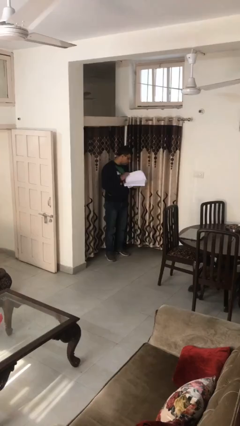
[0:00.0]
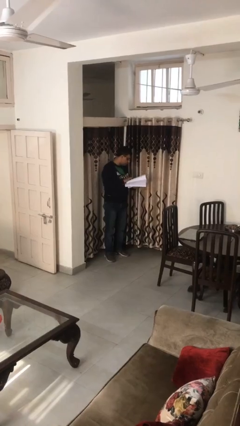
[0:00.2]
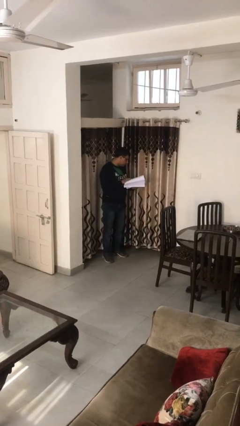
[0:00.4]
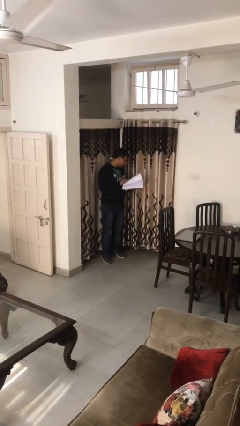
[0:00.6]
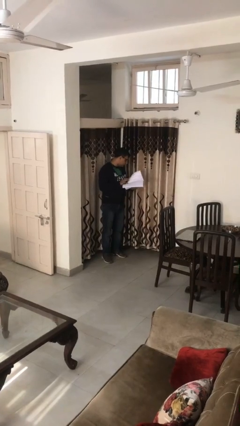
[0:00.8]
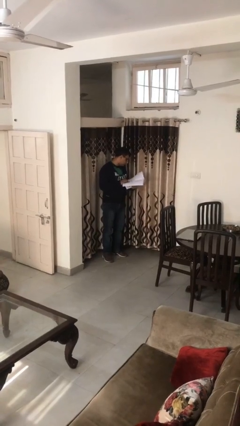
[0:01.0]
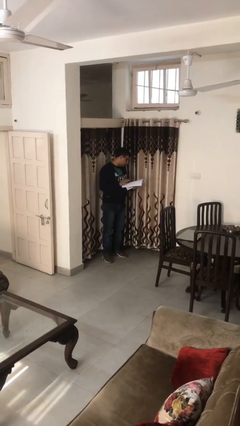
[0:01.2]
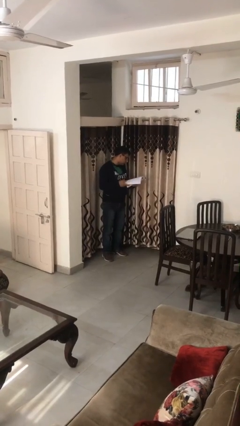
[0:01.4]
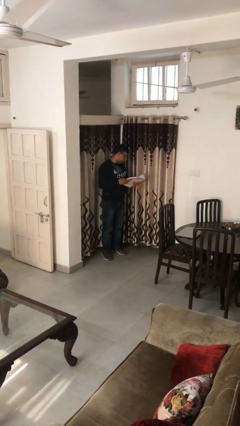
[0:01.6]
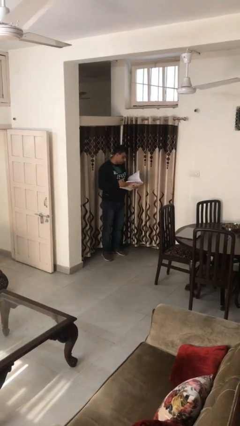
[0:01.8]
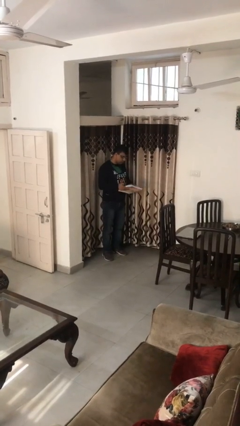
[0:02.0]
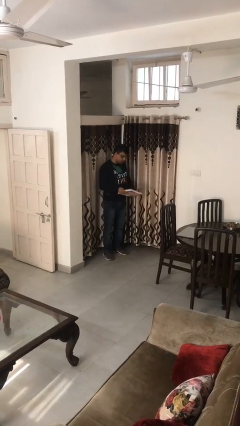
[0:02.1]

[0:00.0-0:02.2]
person reads document

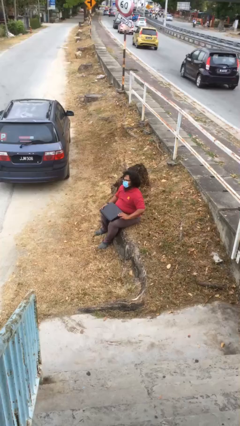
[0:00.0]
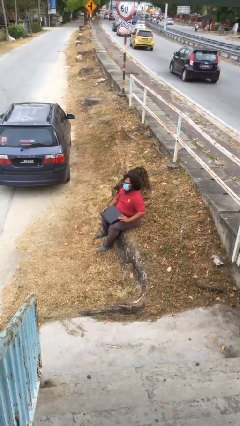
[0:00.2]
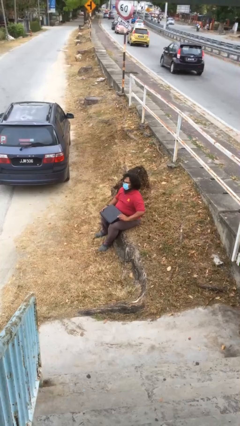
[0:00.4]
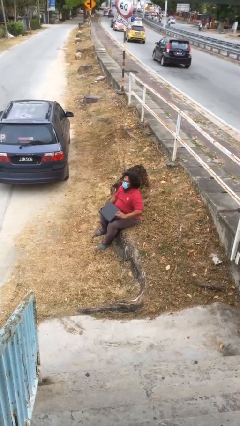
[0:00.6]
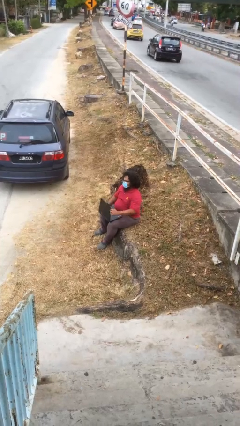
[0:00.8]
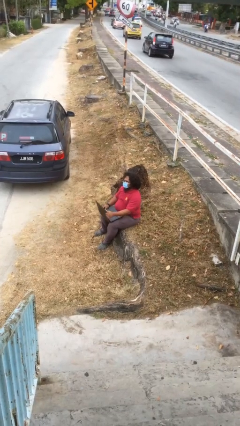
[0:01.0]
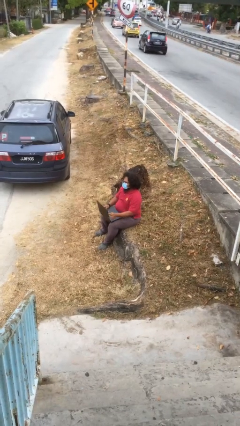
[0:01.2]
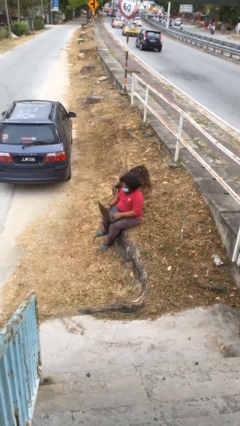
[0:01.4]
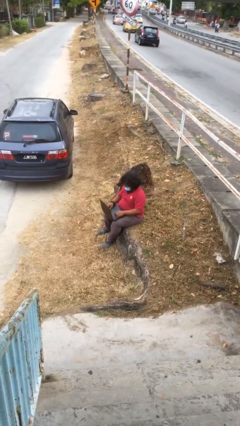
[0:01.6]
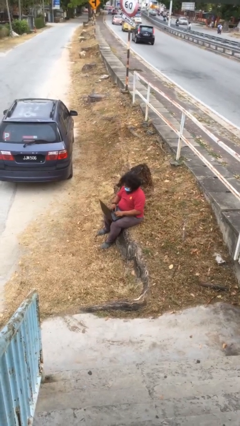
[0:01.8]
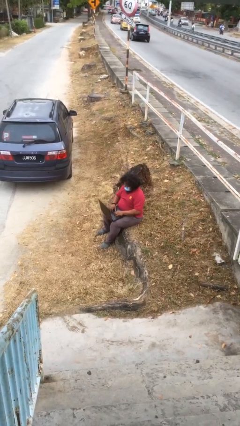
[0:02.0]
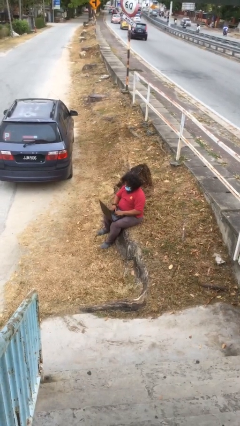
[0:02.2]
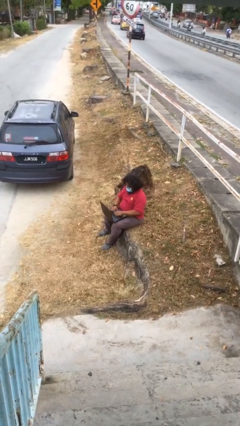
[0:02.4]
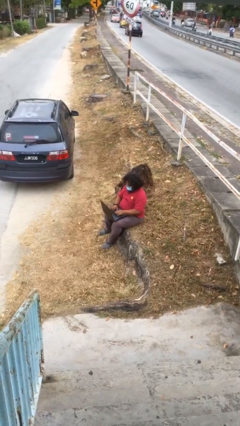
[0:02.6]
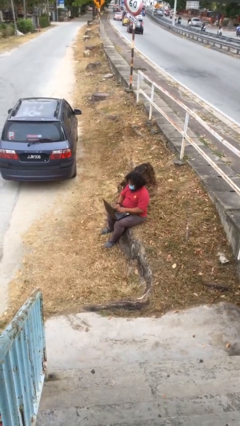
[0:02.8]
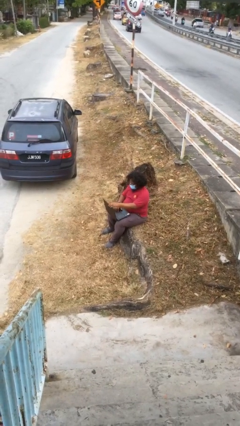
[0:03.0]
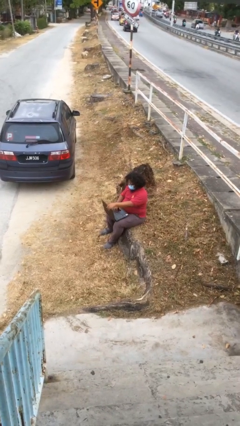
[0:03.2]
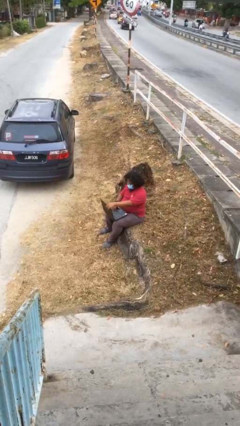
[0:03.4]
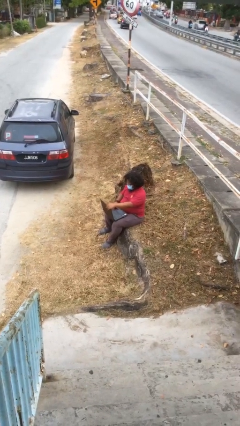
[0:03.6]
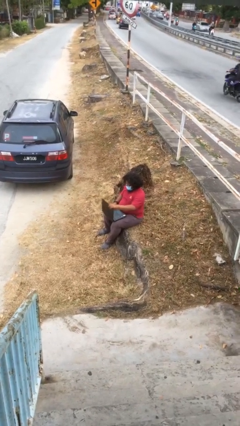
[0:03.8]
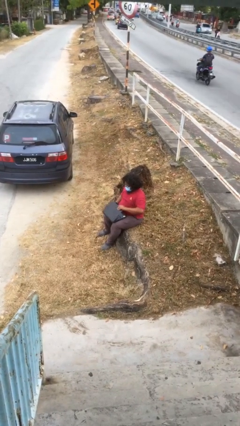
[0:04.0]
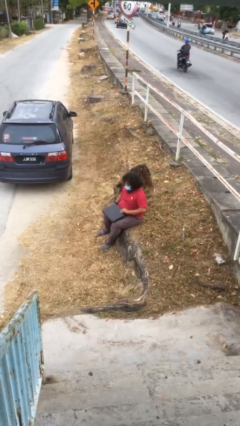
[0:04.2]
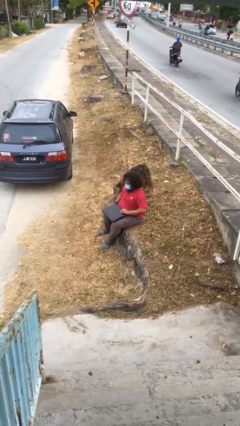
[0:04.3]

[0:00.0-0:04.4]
person interacts with laptop

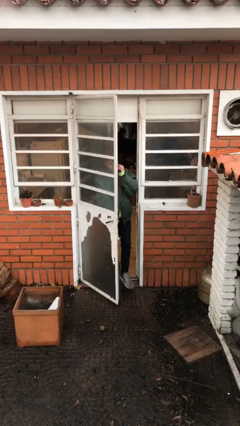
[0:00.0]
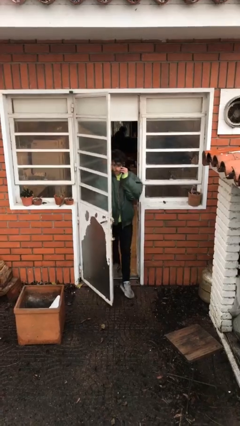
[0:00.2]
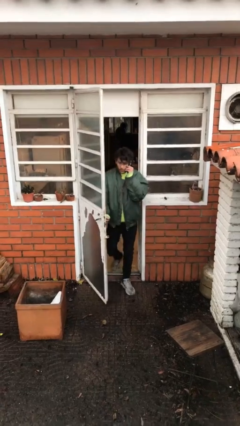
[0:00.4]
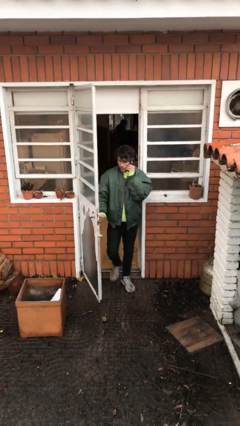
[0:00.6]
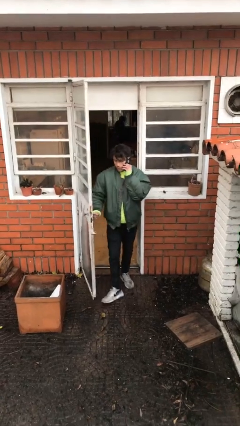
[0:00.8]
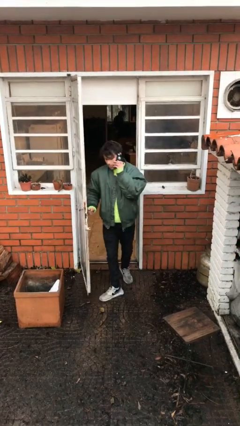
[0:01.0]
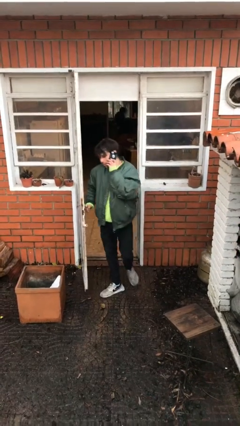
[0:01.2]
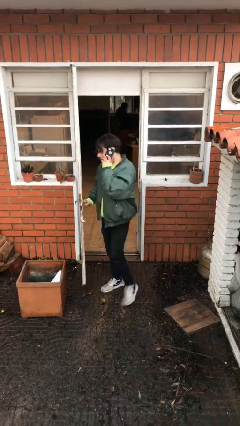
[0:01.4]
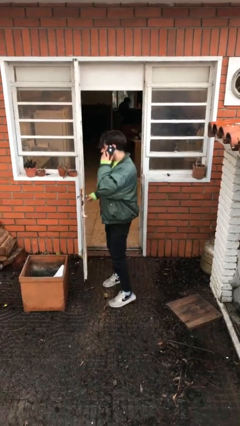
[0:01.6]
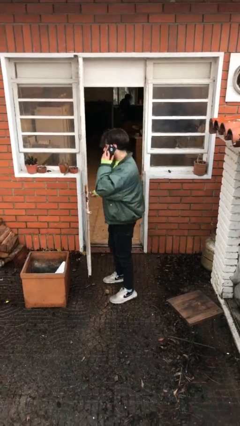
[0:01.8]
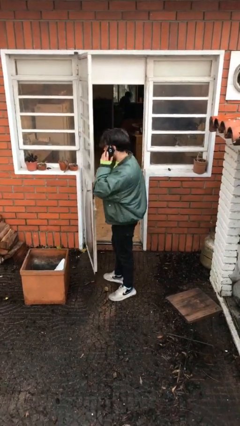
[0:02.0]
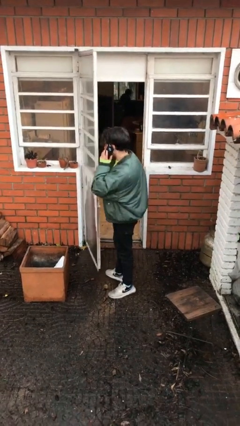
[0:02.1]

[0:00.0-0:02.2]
person enters scene through structure

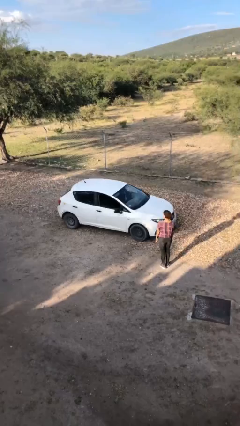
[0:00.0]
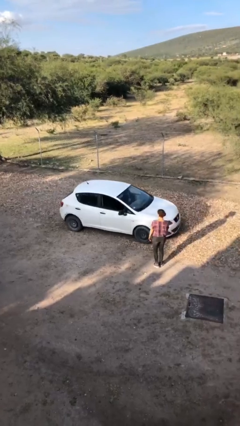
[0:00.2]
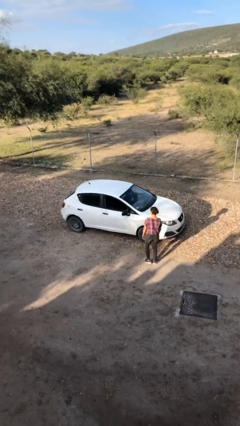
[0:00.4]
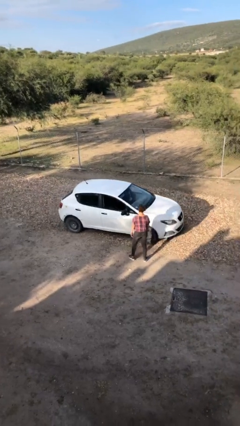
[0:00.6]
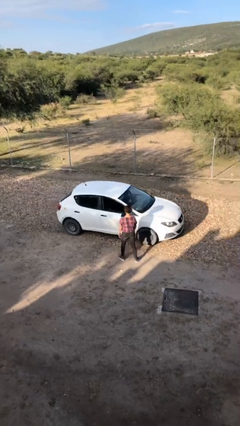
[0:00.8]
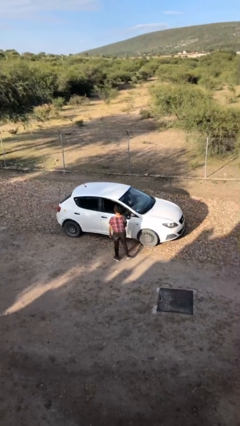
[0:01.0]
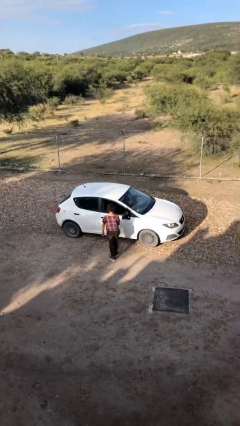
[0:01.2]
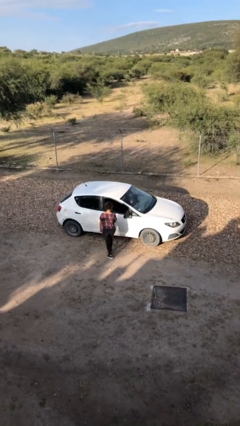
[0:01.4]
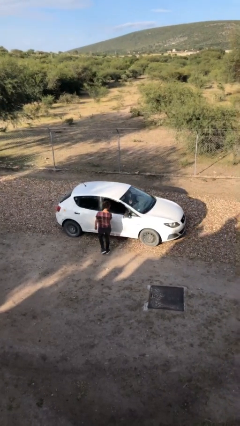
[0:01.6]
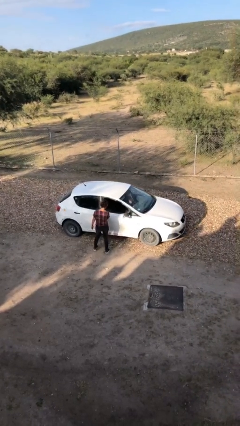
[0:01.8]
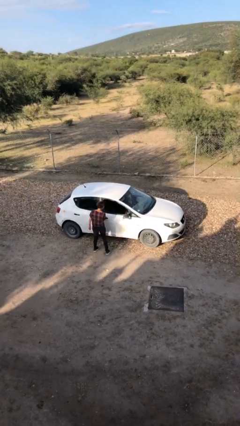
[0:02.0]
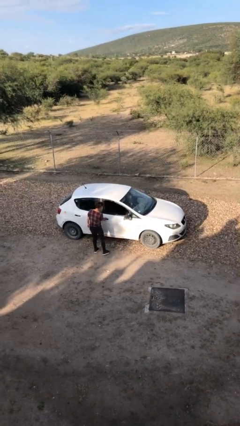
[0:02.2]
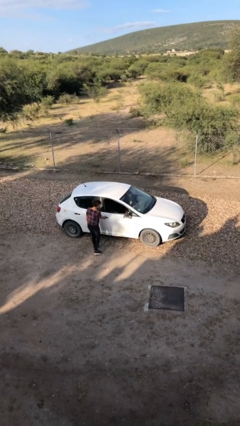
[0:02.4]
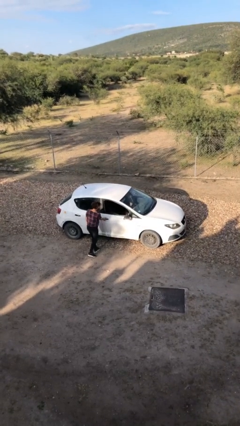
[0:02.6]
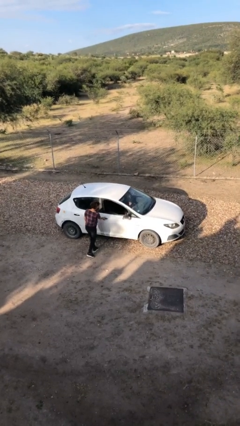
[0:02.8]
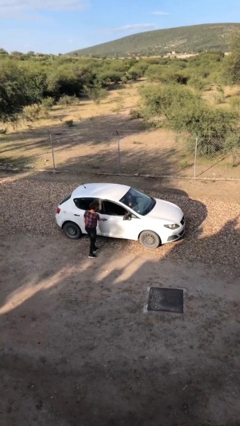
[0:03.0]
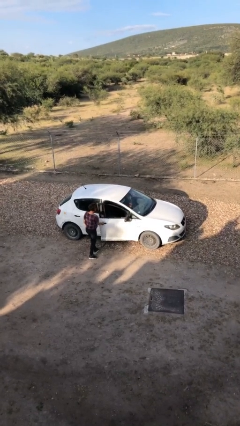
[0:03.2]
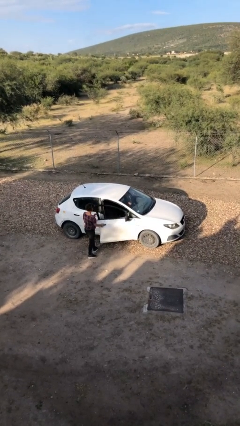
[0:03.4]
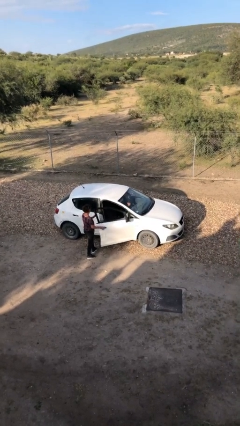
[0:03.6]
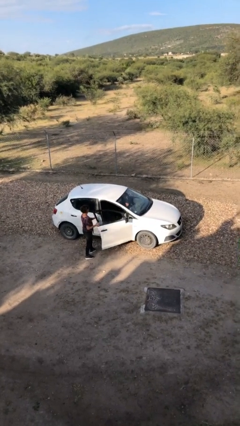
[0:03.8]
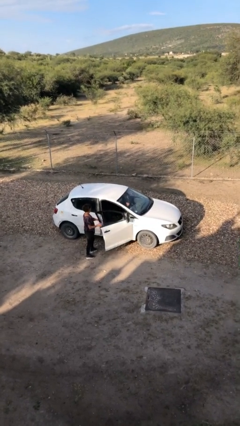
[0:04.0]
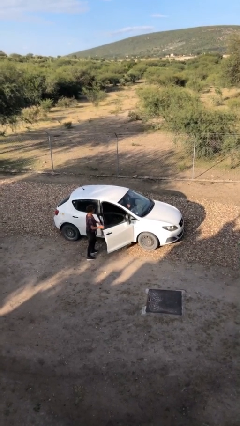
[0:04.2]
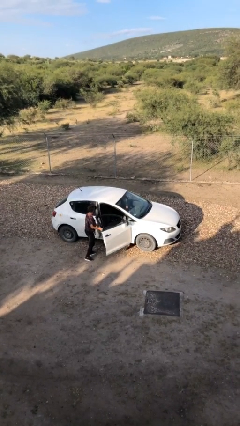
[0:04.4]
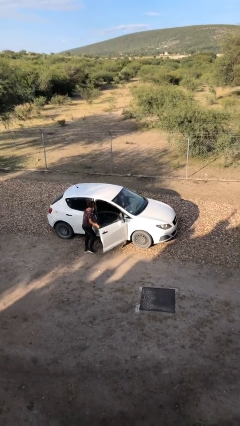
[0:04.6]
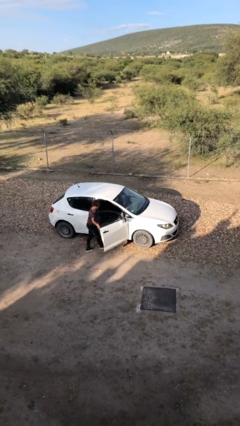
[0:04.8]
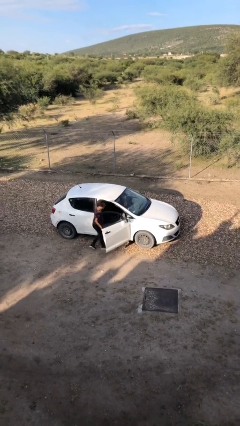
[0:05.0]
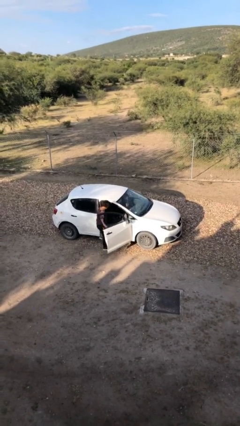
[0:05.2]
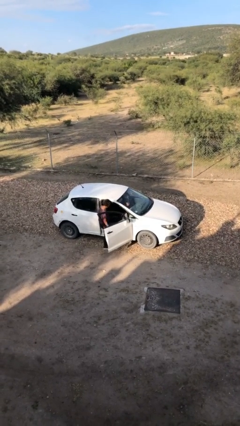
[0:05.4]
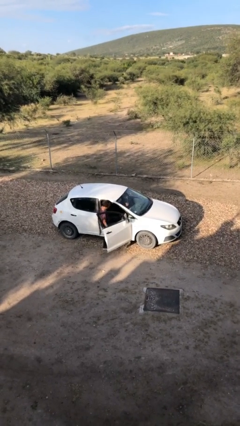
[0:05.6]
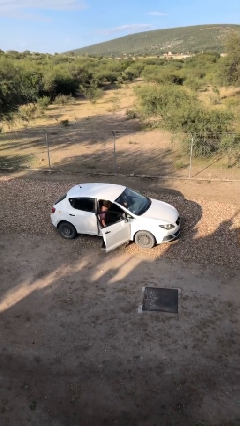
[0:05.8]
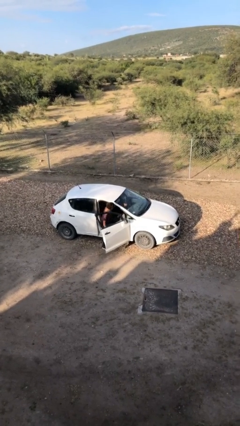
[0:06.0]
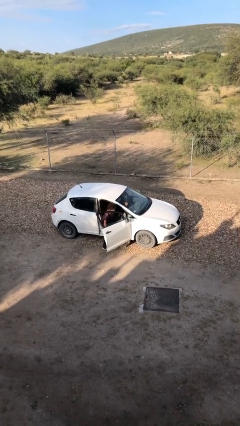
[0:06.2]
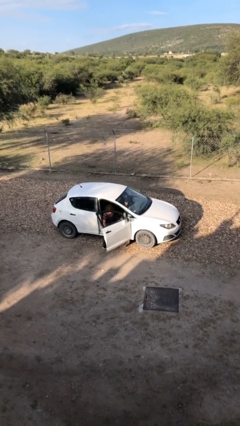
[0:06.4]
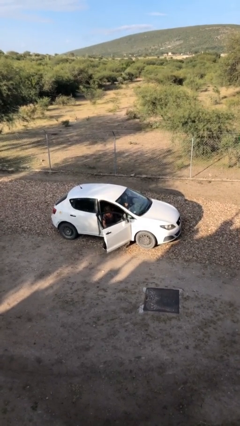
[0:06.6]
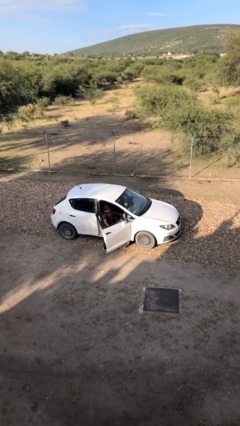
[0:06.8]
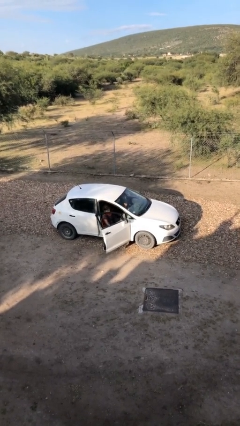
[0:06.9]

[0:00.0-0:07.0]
car picks up person

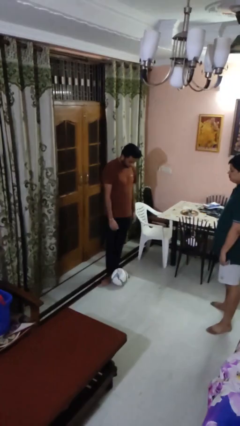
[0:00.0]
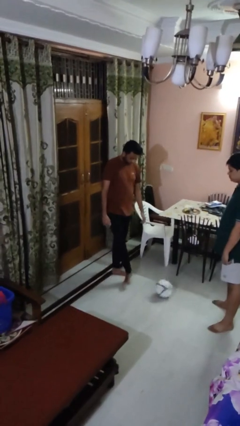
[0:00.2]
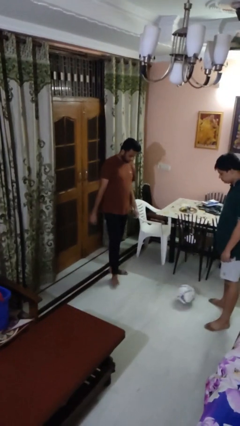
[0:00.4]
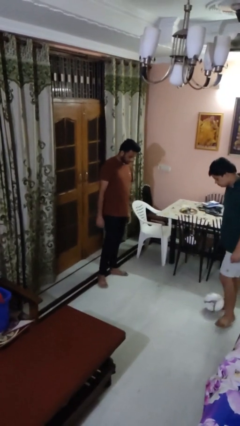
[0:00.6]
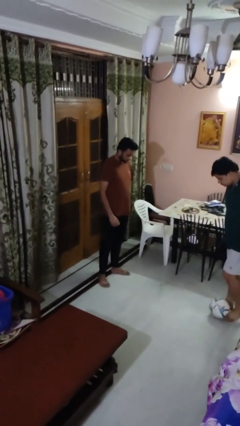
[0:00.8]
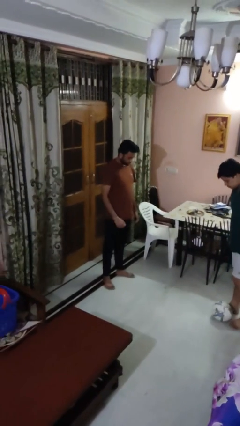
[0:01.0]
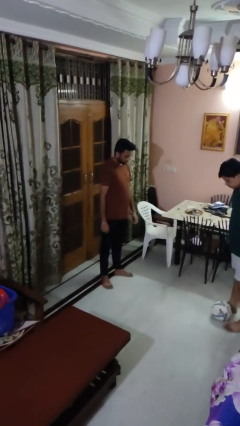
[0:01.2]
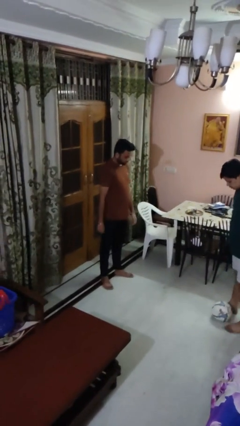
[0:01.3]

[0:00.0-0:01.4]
person kicks object to person

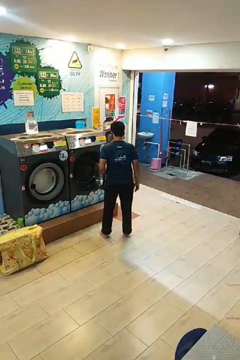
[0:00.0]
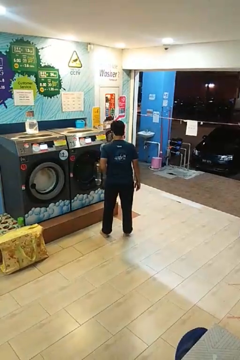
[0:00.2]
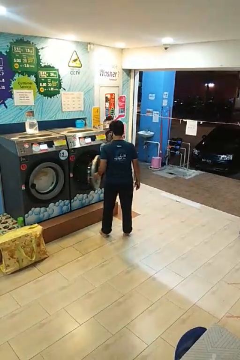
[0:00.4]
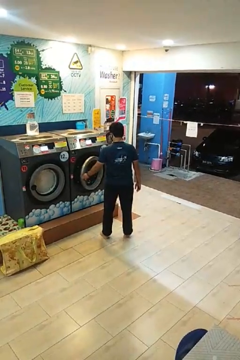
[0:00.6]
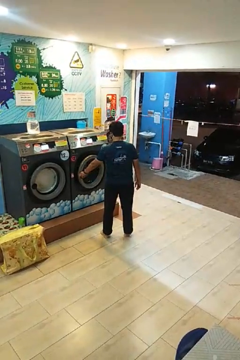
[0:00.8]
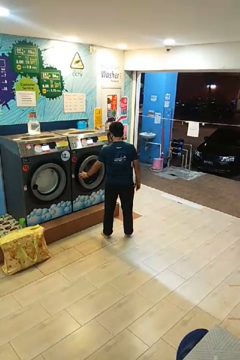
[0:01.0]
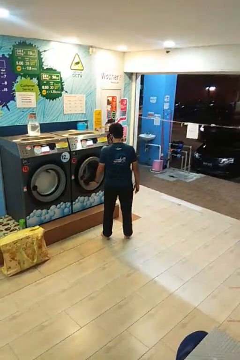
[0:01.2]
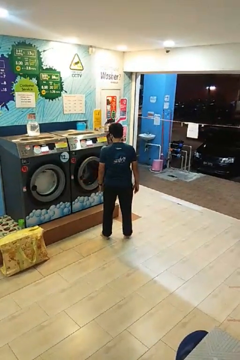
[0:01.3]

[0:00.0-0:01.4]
person closes clothes washer
